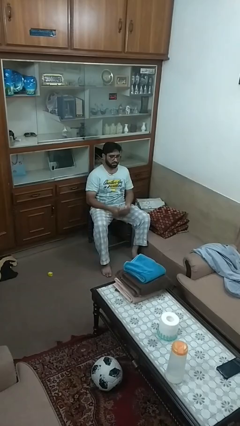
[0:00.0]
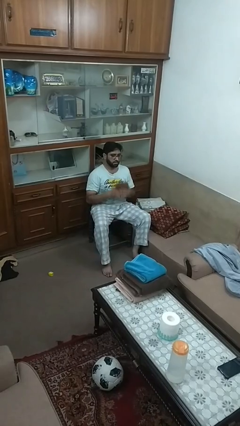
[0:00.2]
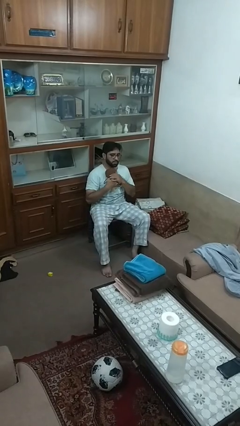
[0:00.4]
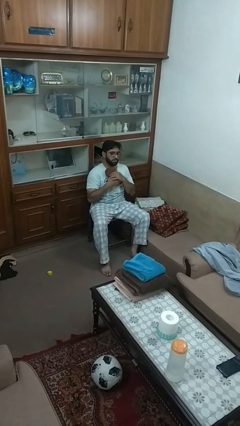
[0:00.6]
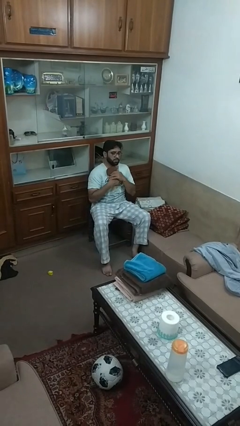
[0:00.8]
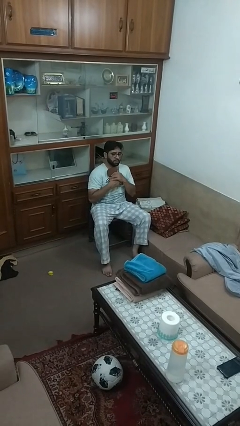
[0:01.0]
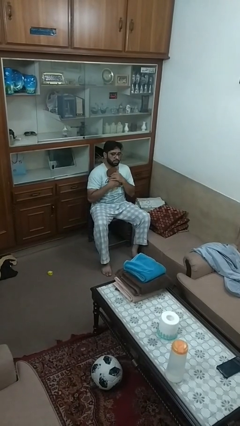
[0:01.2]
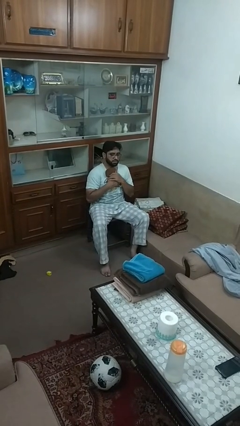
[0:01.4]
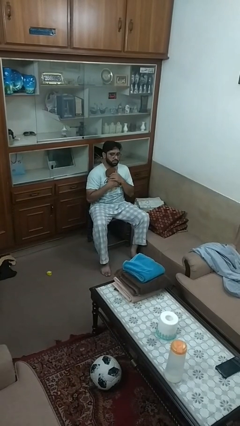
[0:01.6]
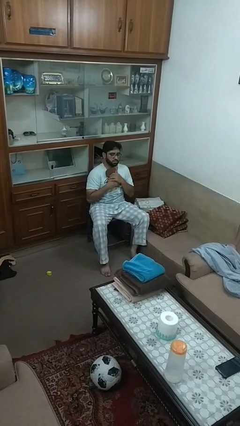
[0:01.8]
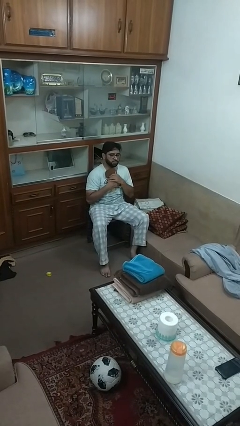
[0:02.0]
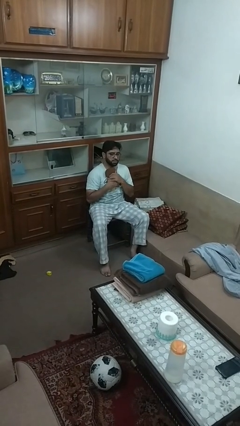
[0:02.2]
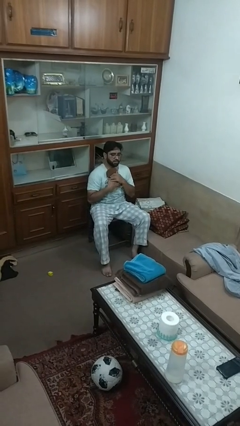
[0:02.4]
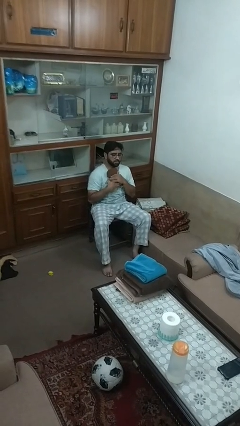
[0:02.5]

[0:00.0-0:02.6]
person hugs stuffed animal

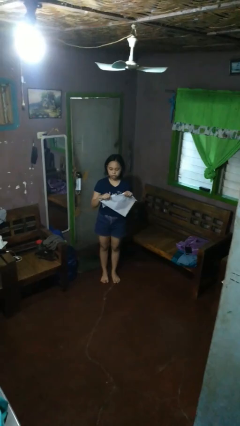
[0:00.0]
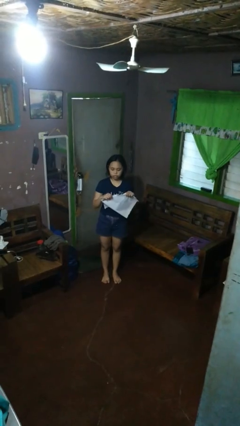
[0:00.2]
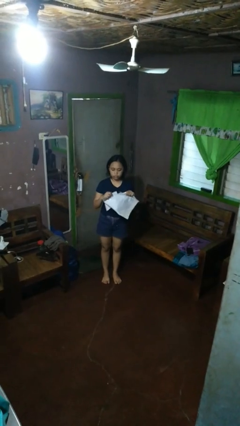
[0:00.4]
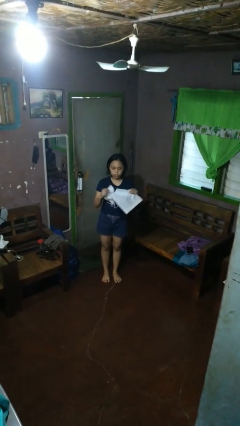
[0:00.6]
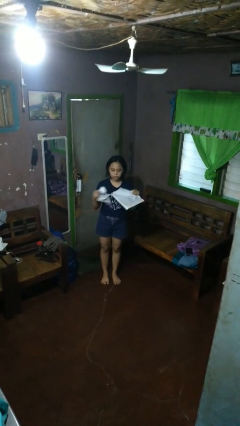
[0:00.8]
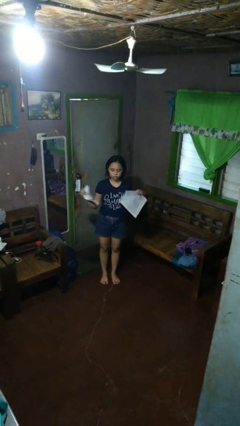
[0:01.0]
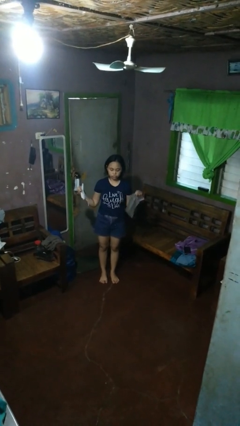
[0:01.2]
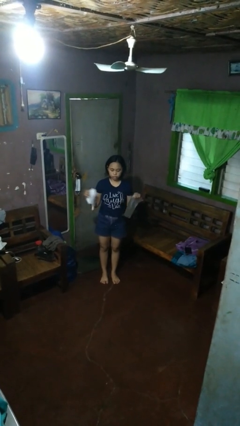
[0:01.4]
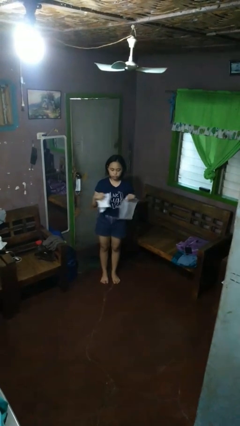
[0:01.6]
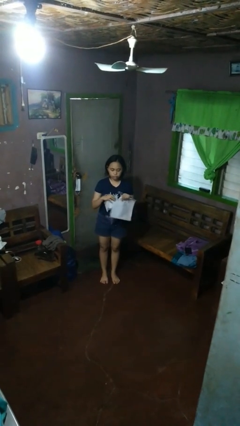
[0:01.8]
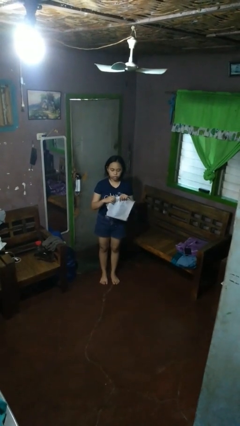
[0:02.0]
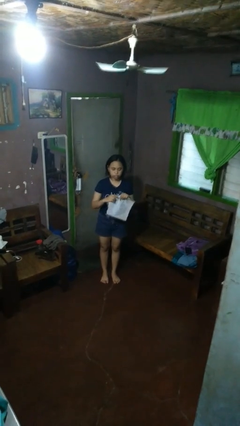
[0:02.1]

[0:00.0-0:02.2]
person tears paper

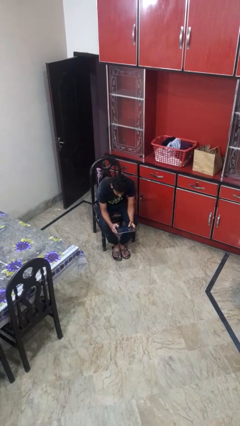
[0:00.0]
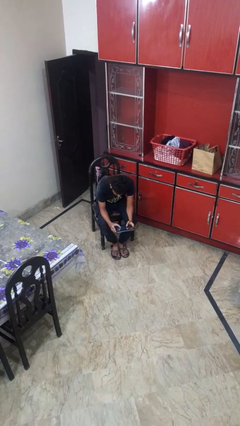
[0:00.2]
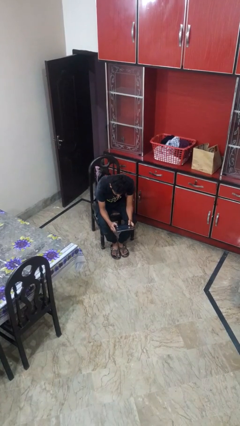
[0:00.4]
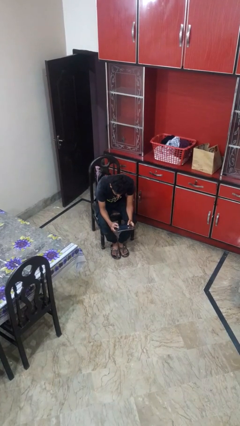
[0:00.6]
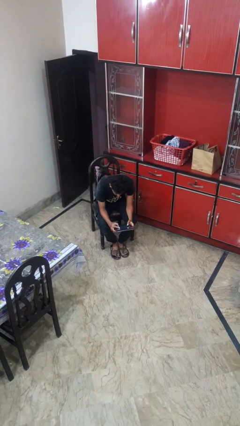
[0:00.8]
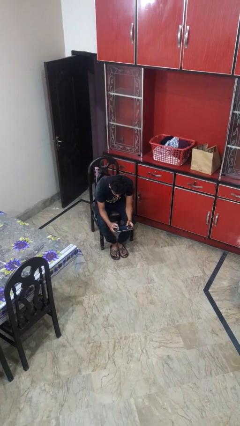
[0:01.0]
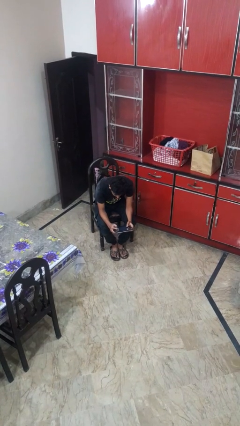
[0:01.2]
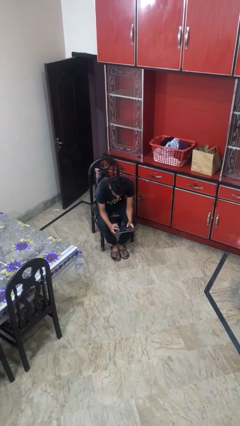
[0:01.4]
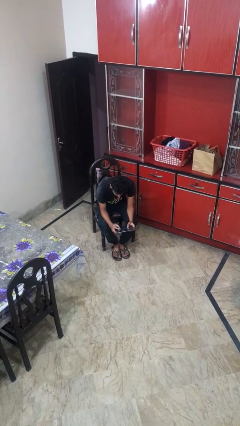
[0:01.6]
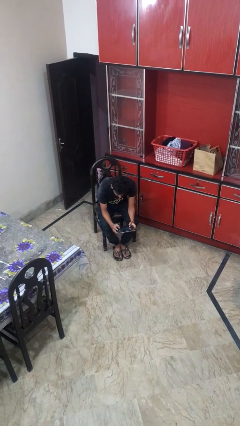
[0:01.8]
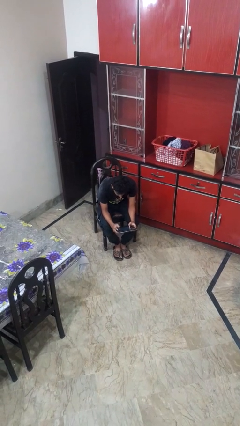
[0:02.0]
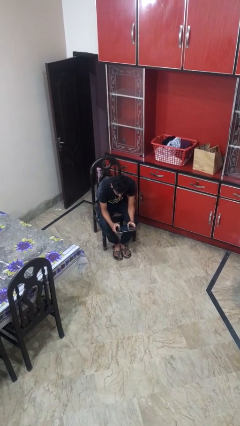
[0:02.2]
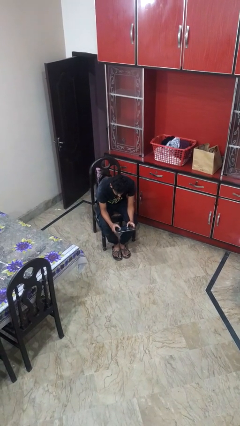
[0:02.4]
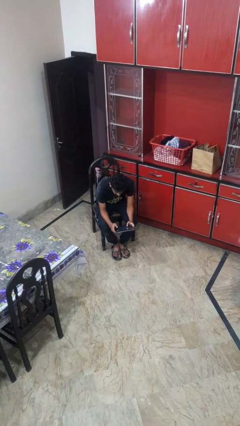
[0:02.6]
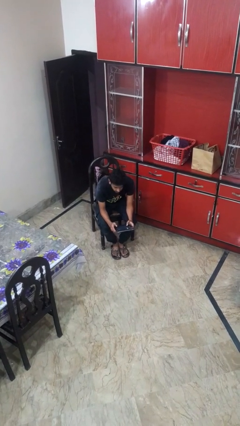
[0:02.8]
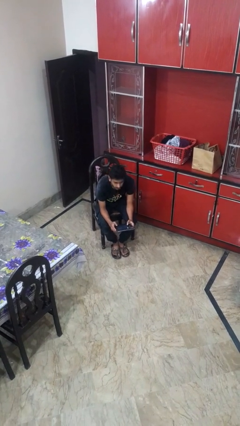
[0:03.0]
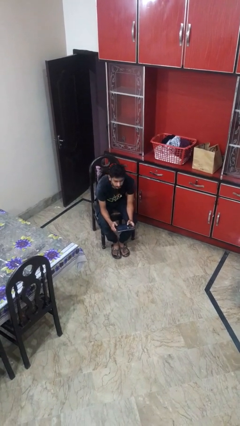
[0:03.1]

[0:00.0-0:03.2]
person interacts with tablet

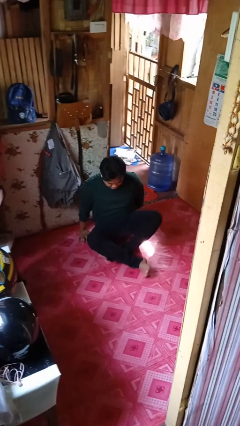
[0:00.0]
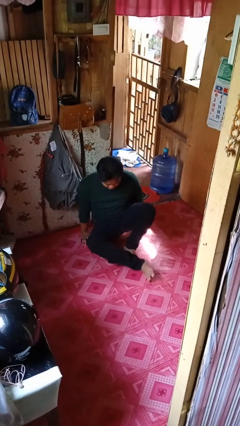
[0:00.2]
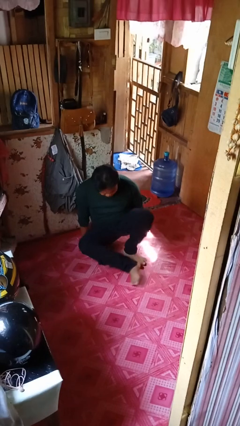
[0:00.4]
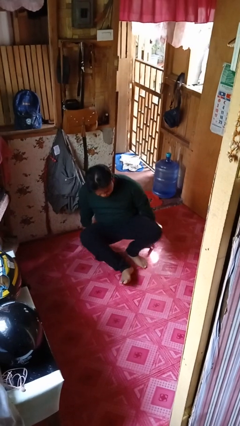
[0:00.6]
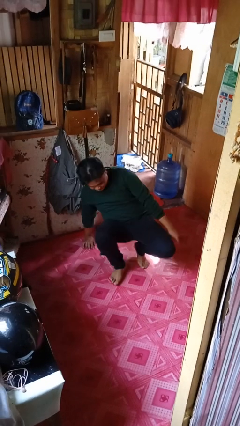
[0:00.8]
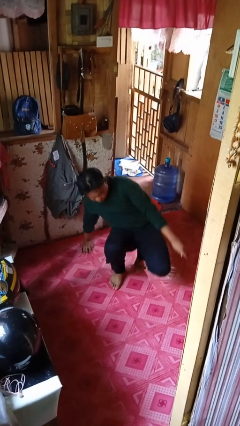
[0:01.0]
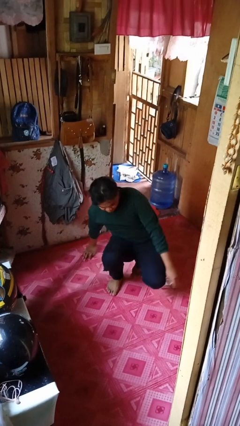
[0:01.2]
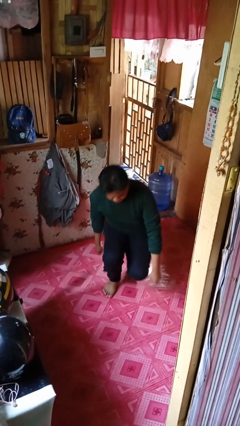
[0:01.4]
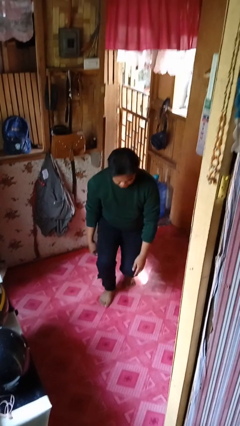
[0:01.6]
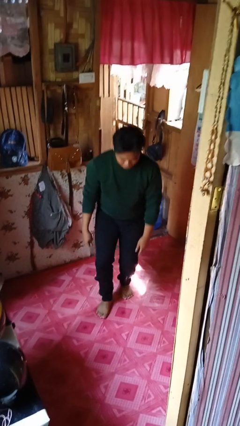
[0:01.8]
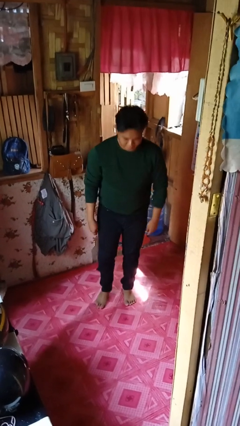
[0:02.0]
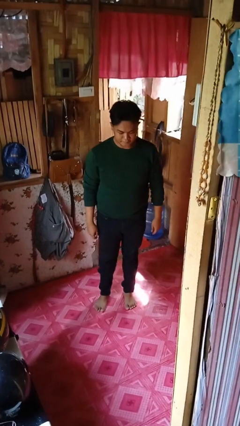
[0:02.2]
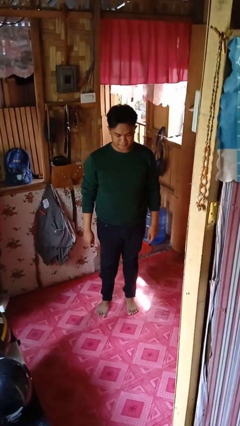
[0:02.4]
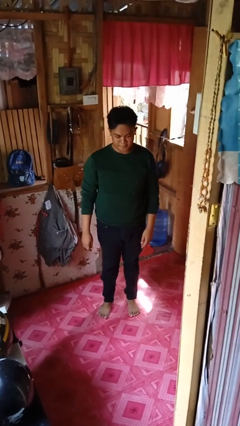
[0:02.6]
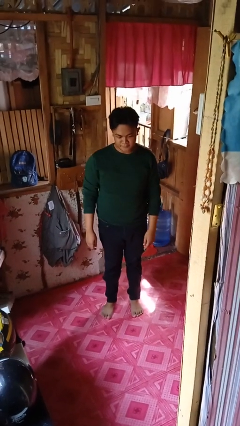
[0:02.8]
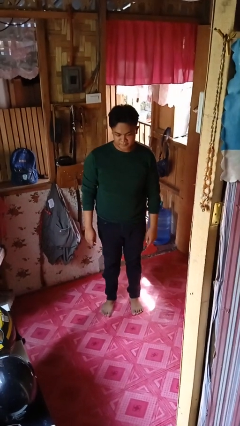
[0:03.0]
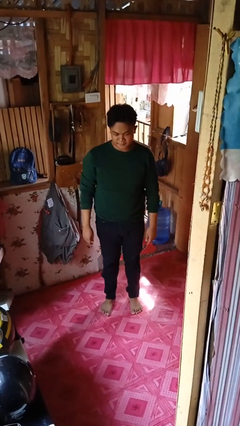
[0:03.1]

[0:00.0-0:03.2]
person stands up from floor

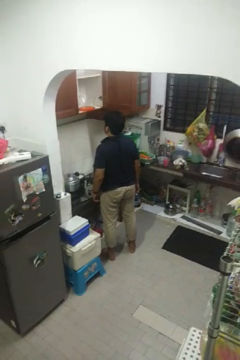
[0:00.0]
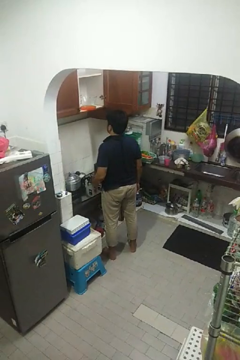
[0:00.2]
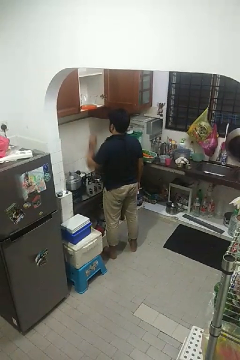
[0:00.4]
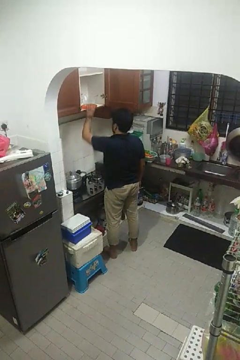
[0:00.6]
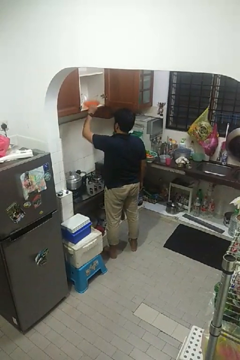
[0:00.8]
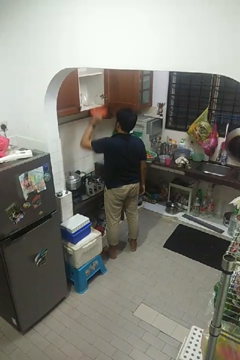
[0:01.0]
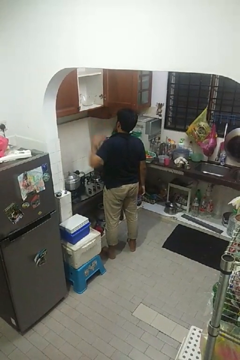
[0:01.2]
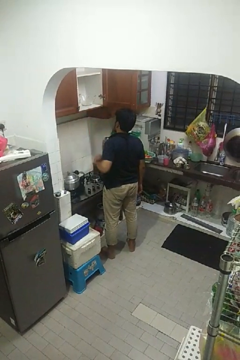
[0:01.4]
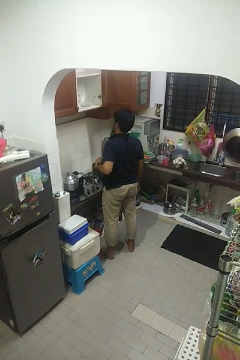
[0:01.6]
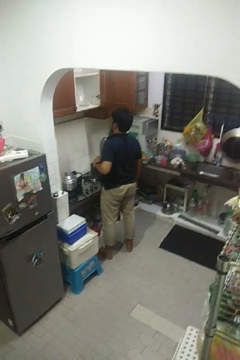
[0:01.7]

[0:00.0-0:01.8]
person takes object from cabinet

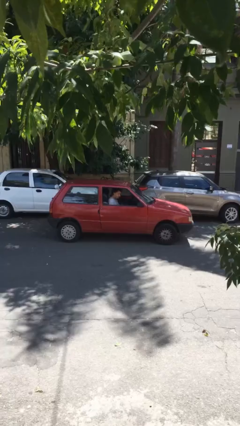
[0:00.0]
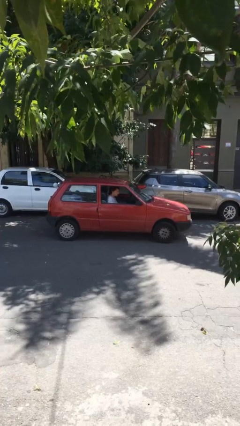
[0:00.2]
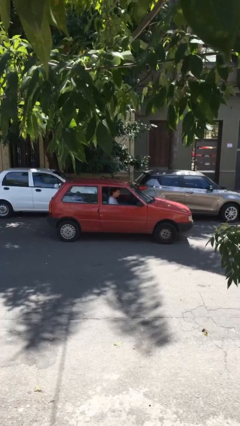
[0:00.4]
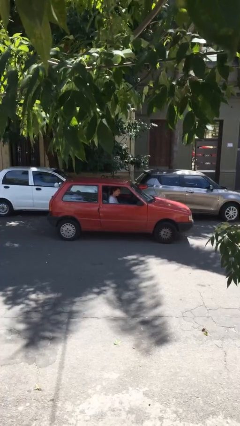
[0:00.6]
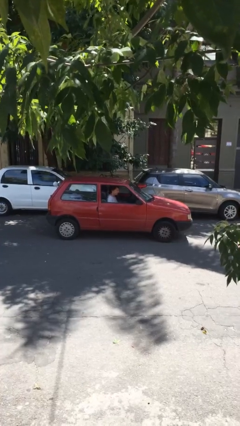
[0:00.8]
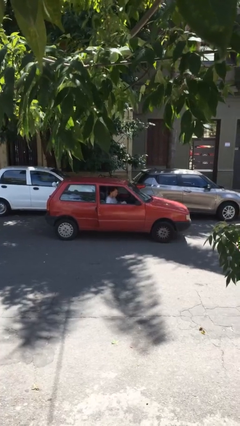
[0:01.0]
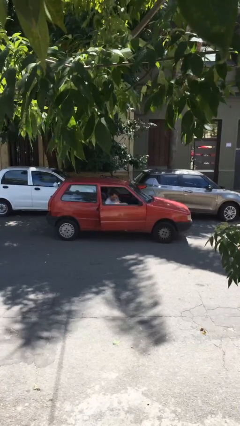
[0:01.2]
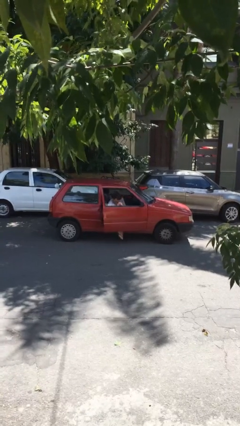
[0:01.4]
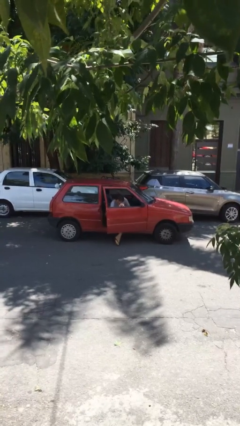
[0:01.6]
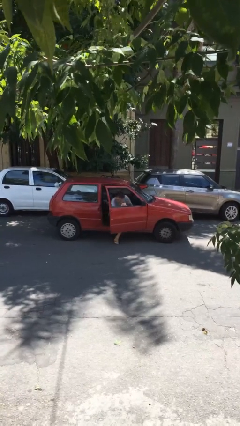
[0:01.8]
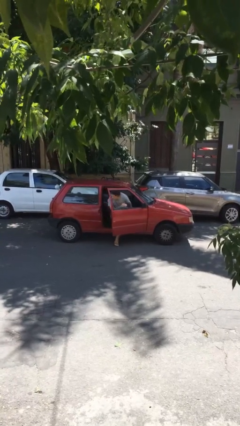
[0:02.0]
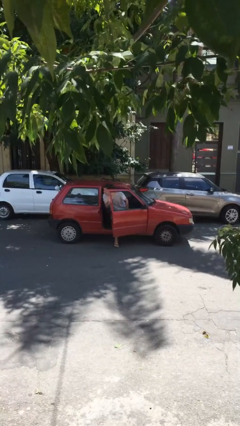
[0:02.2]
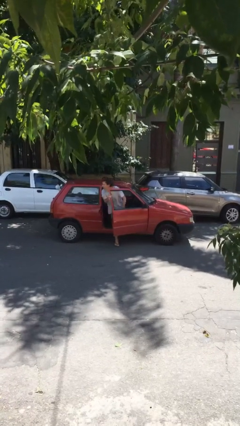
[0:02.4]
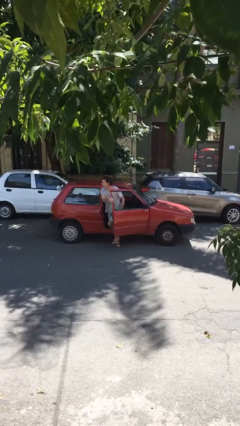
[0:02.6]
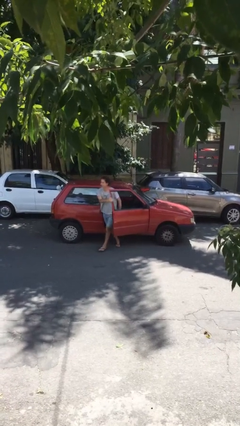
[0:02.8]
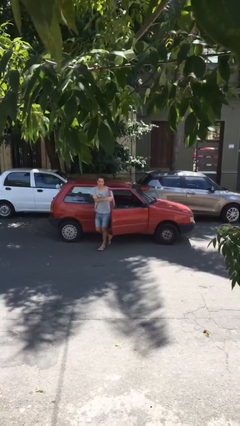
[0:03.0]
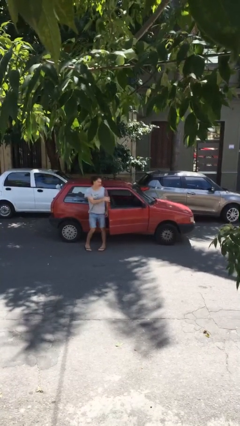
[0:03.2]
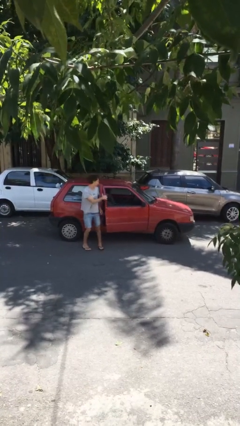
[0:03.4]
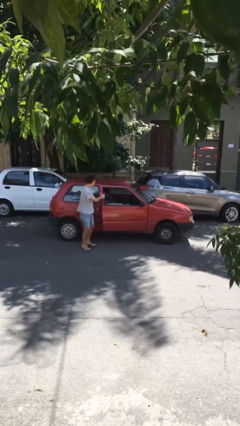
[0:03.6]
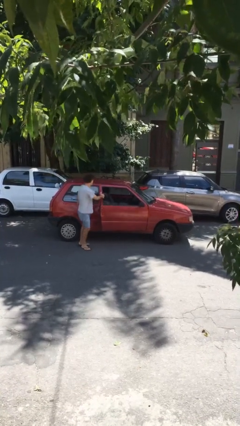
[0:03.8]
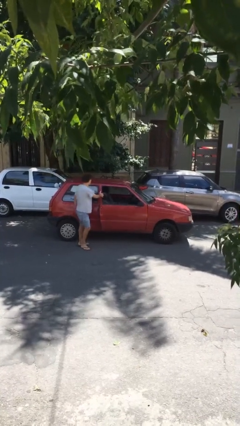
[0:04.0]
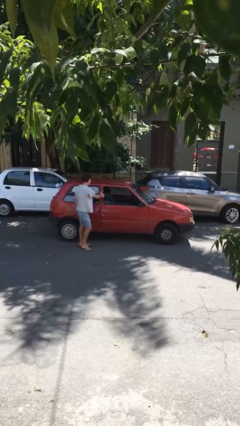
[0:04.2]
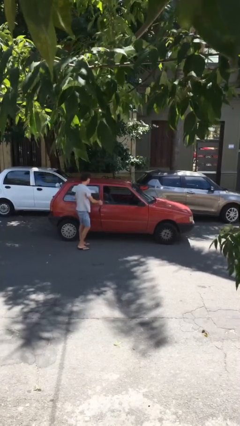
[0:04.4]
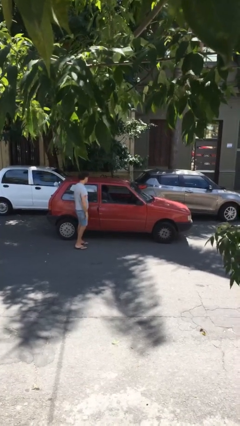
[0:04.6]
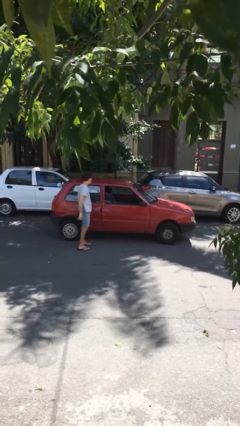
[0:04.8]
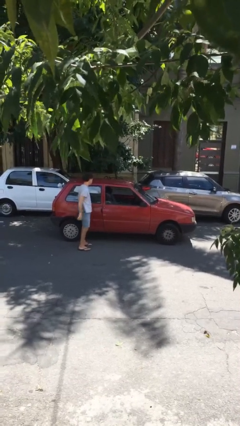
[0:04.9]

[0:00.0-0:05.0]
car drops off person
